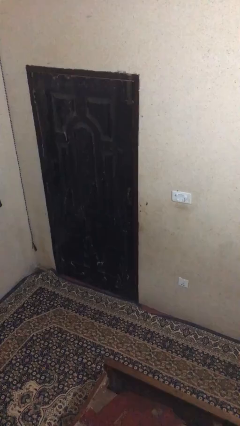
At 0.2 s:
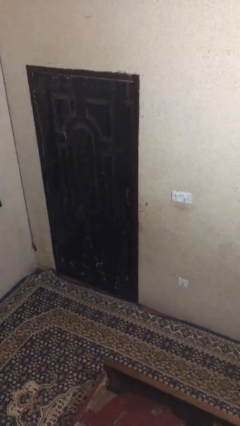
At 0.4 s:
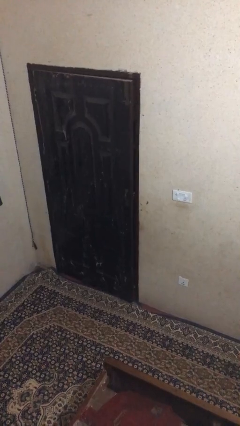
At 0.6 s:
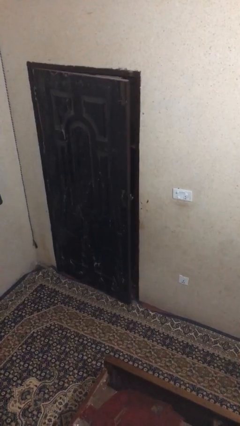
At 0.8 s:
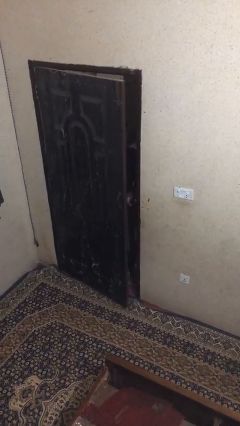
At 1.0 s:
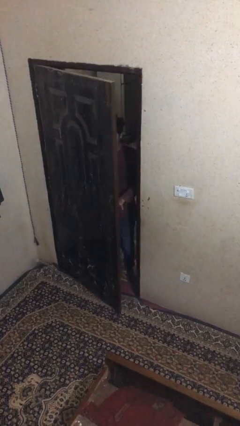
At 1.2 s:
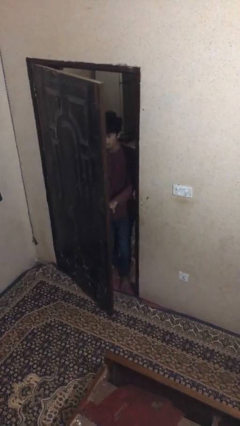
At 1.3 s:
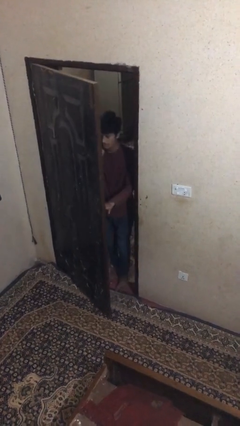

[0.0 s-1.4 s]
person opens facility door

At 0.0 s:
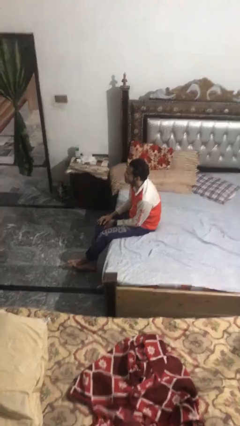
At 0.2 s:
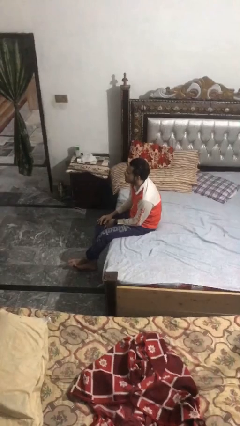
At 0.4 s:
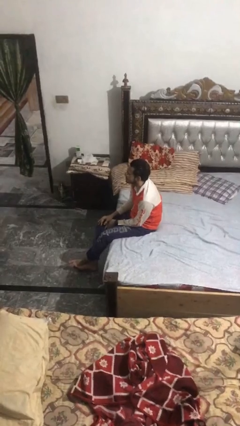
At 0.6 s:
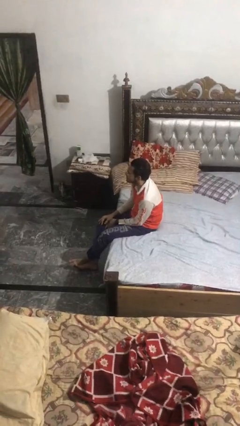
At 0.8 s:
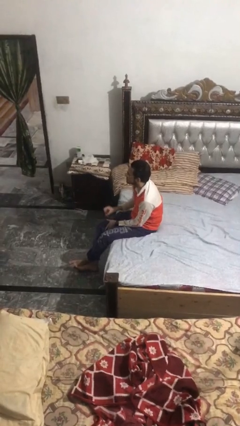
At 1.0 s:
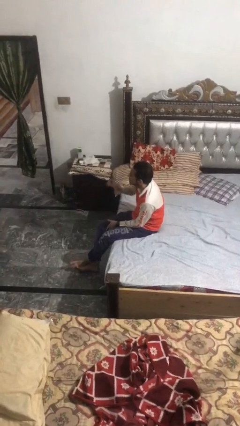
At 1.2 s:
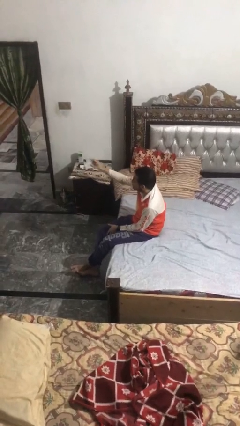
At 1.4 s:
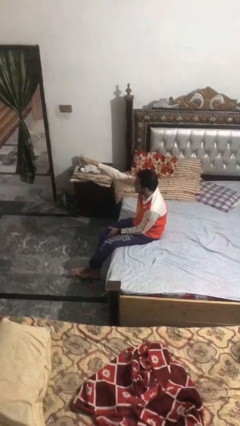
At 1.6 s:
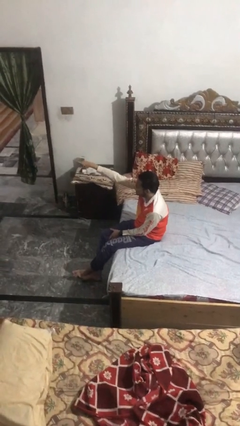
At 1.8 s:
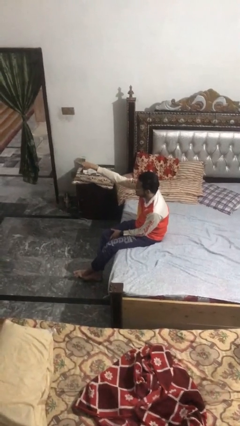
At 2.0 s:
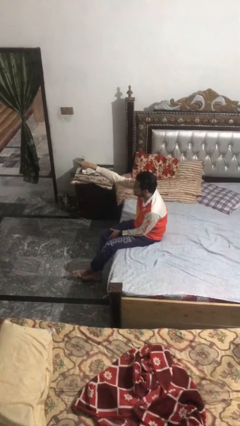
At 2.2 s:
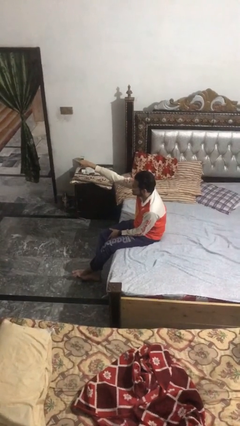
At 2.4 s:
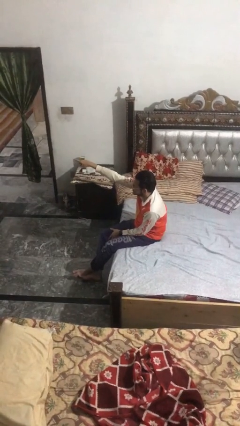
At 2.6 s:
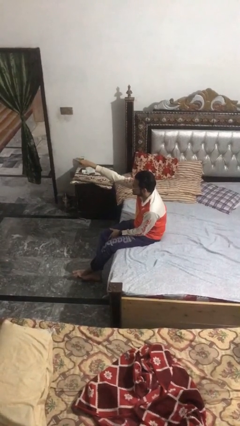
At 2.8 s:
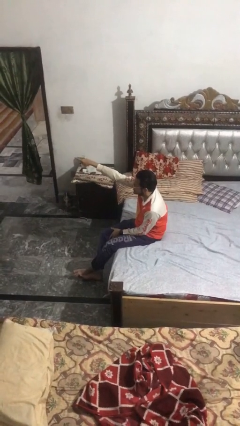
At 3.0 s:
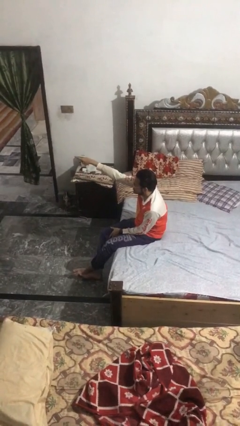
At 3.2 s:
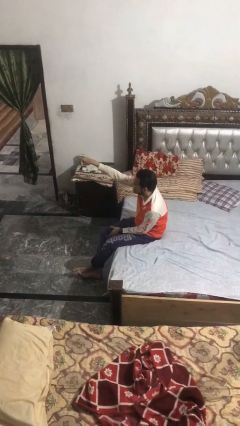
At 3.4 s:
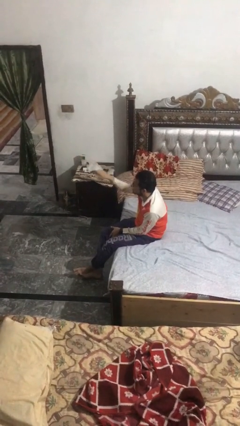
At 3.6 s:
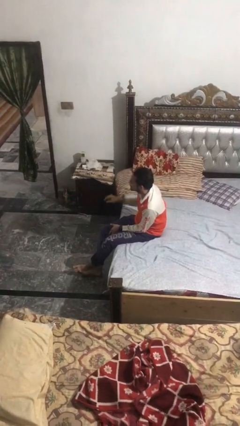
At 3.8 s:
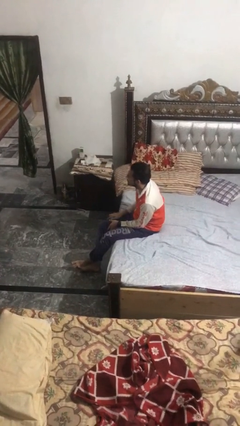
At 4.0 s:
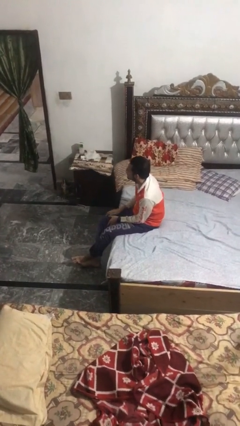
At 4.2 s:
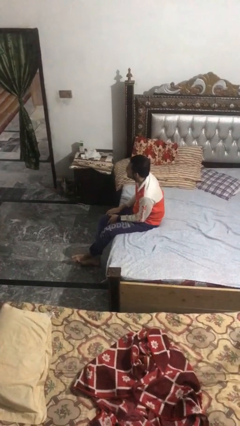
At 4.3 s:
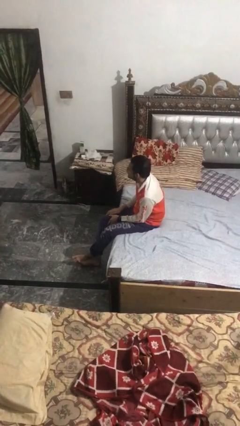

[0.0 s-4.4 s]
person points at person

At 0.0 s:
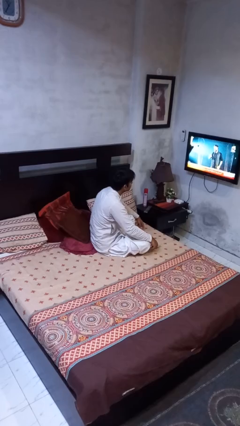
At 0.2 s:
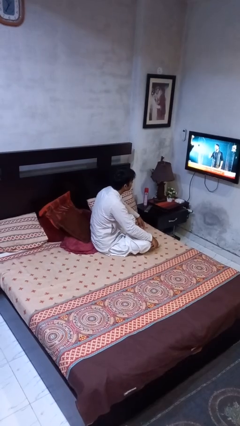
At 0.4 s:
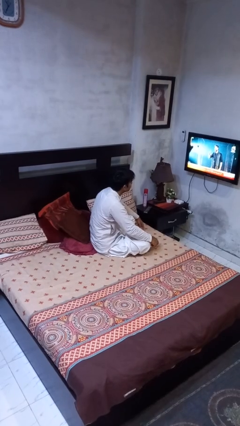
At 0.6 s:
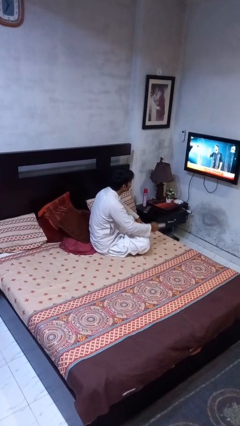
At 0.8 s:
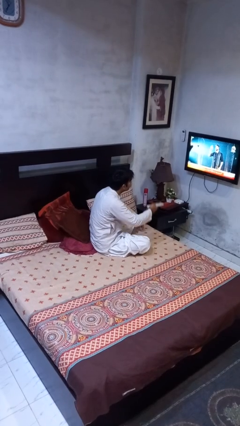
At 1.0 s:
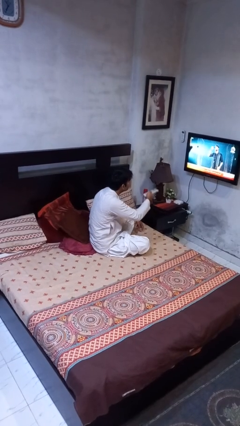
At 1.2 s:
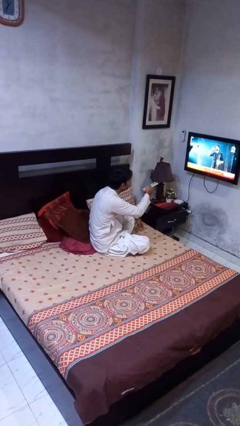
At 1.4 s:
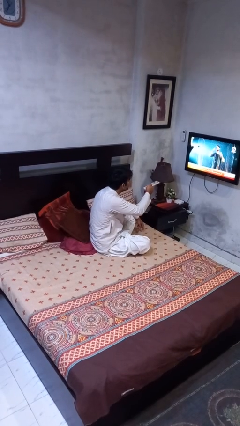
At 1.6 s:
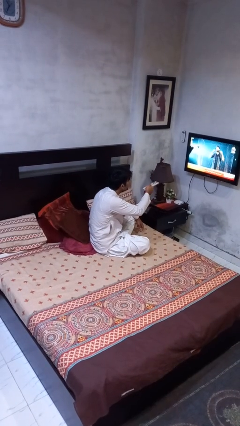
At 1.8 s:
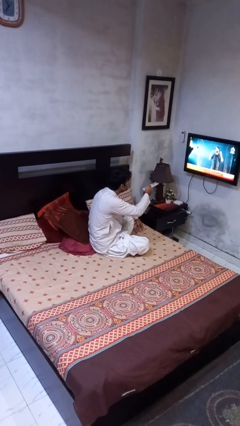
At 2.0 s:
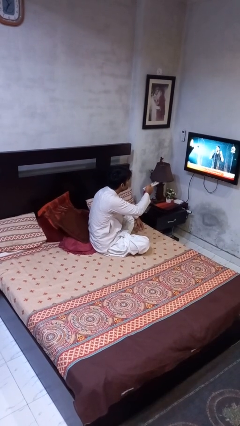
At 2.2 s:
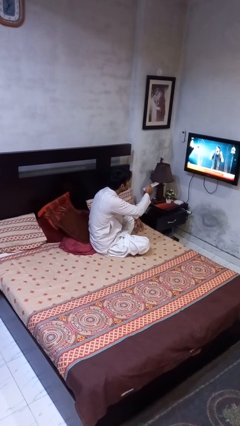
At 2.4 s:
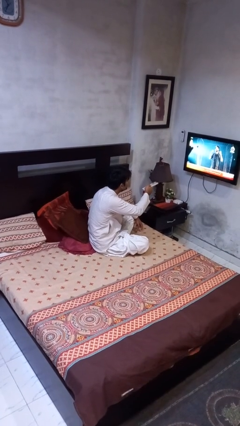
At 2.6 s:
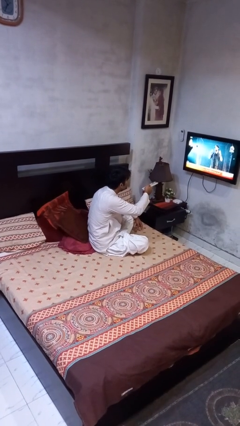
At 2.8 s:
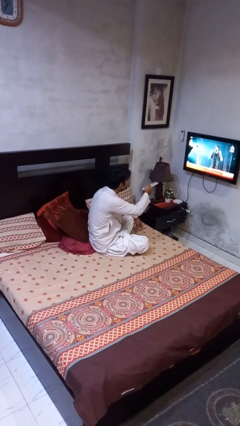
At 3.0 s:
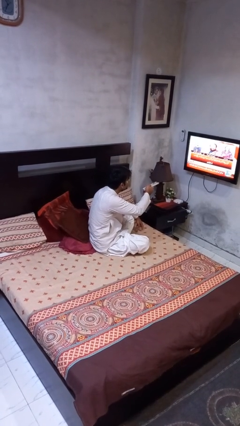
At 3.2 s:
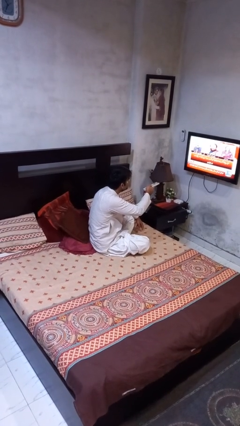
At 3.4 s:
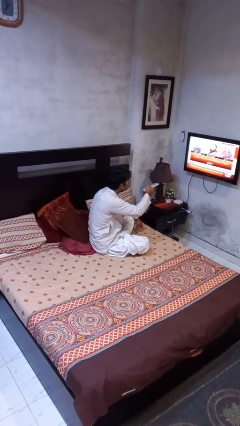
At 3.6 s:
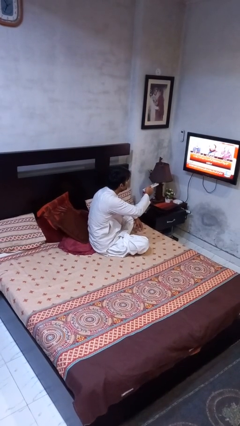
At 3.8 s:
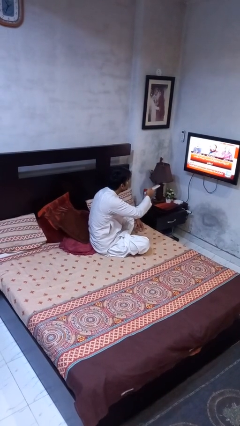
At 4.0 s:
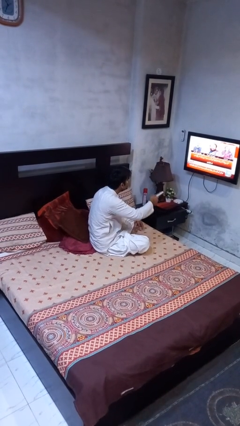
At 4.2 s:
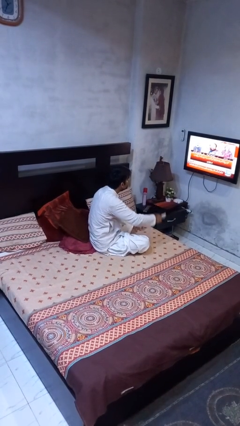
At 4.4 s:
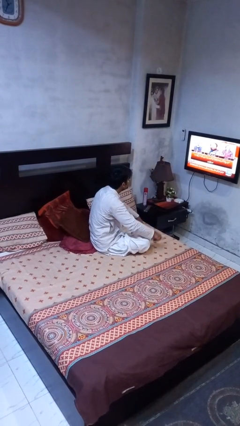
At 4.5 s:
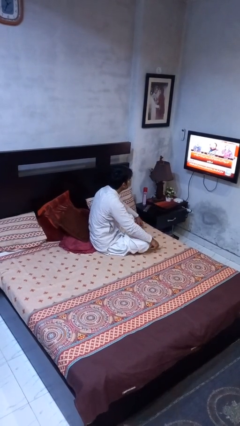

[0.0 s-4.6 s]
person uses television remote

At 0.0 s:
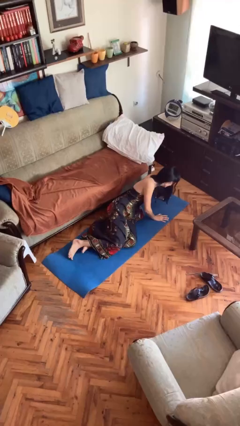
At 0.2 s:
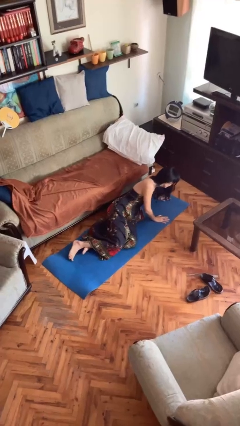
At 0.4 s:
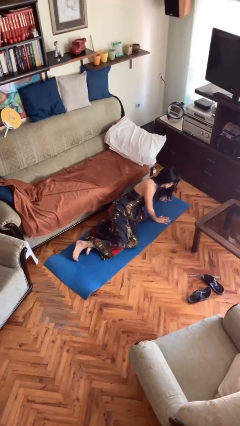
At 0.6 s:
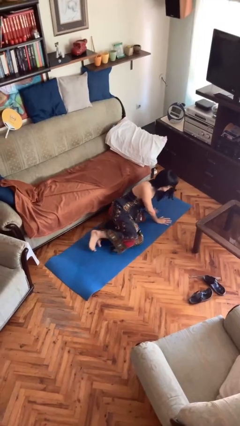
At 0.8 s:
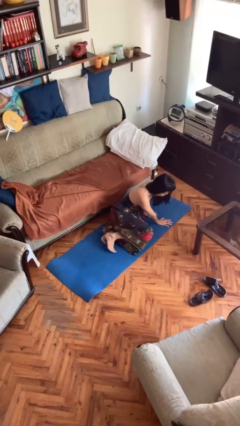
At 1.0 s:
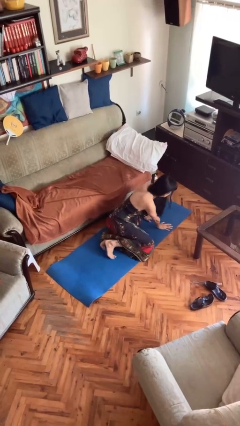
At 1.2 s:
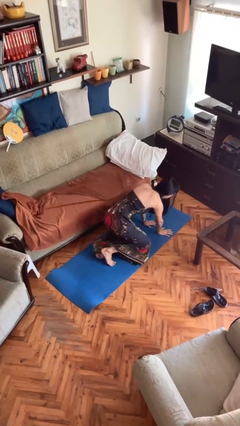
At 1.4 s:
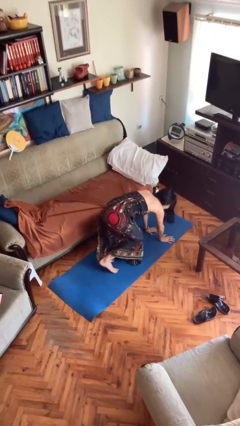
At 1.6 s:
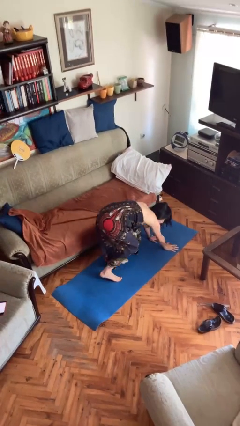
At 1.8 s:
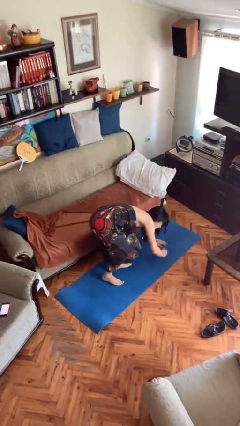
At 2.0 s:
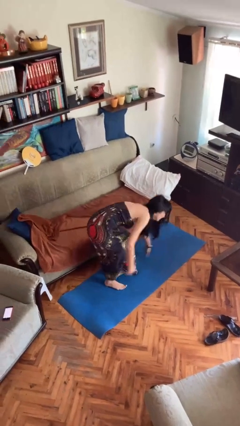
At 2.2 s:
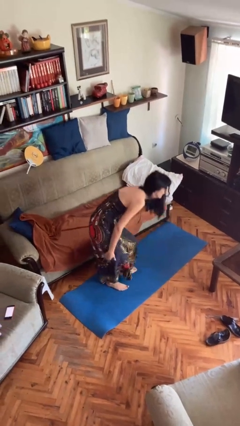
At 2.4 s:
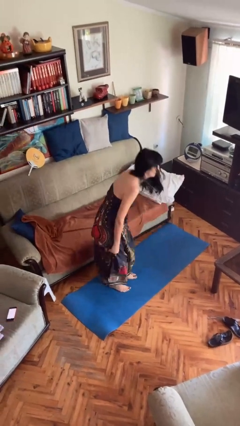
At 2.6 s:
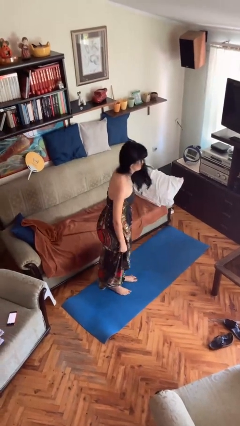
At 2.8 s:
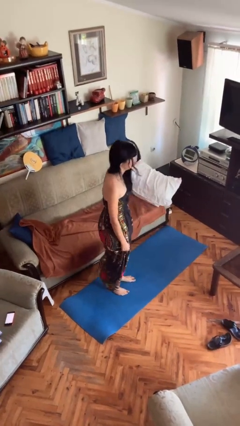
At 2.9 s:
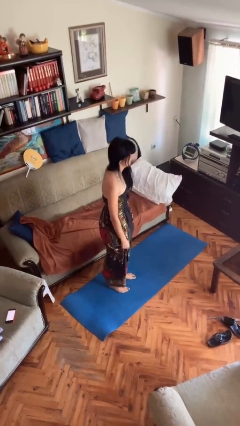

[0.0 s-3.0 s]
person stands up from floor

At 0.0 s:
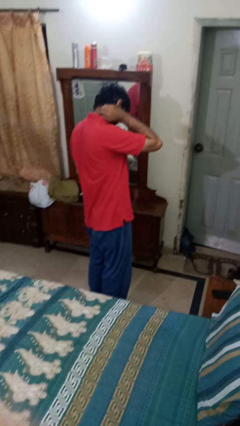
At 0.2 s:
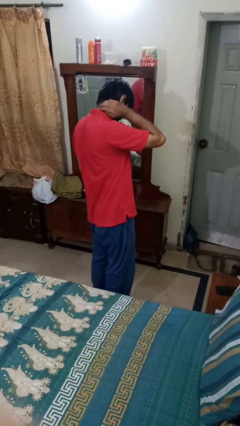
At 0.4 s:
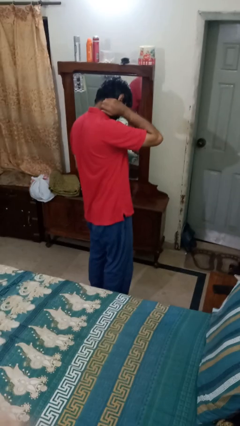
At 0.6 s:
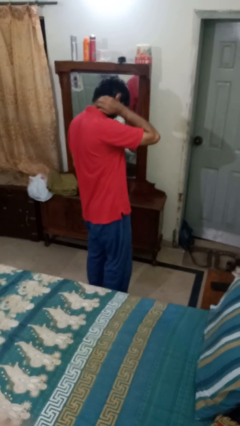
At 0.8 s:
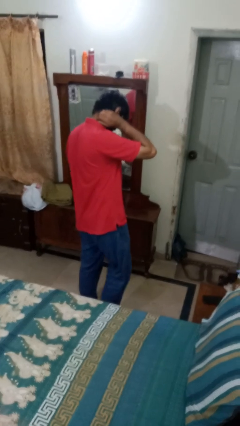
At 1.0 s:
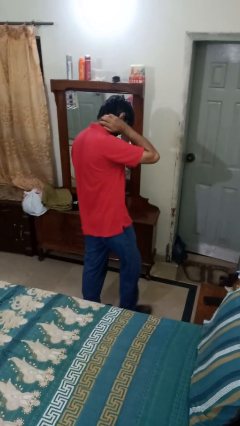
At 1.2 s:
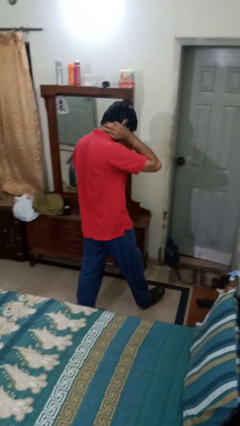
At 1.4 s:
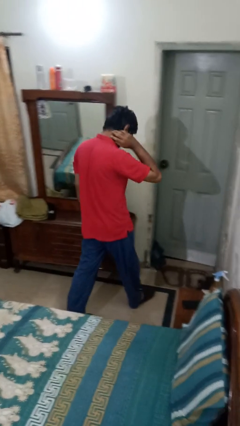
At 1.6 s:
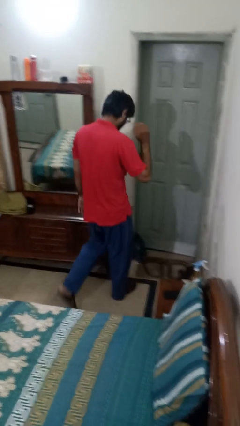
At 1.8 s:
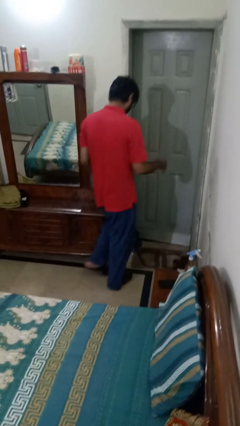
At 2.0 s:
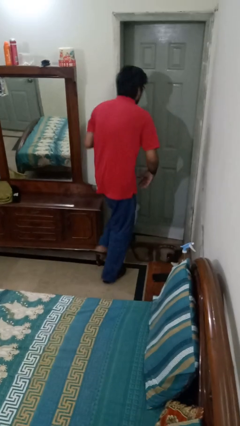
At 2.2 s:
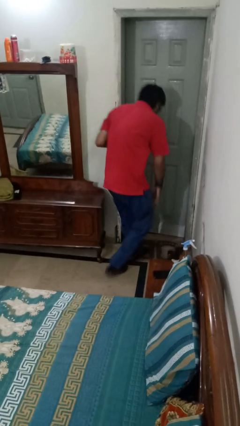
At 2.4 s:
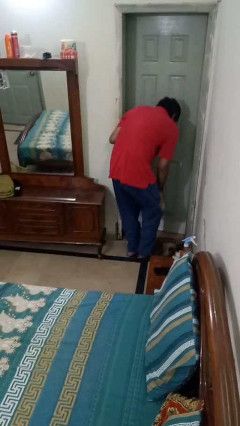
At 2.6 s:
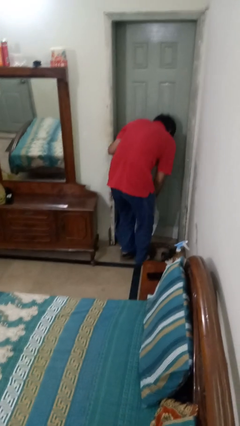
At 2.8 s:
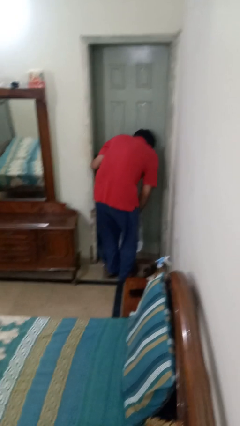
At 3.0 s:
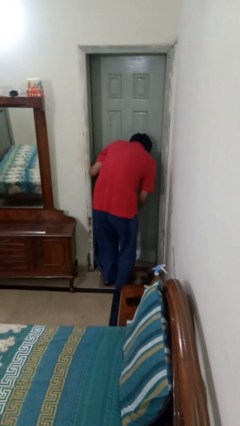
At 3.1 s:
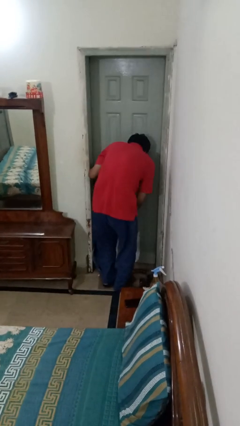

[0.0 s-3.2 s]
person bumps into table

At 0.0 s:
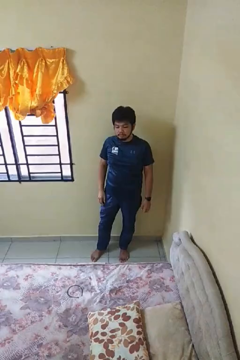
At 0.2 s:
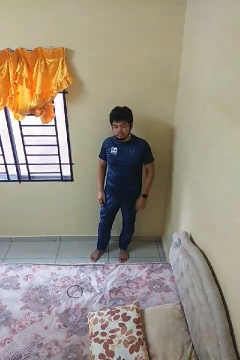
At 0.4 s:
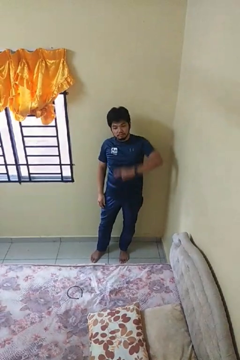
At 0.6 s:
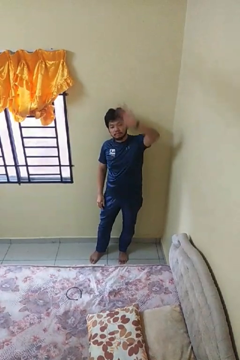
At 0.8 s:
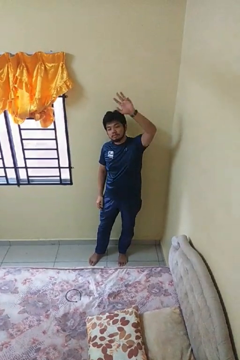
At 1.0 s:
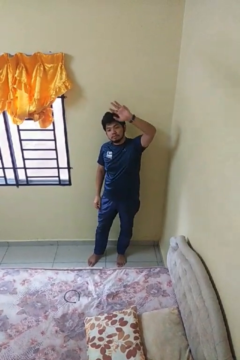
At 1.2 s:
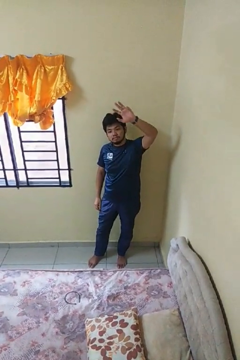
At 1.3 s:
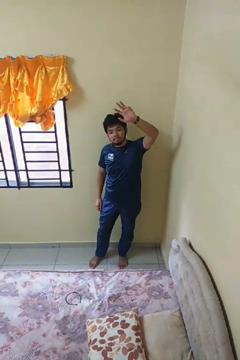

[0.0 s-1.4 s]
person gestures swipe up
